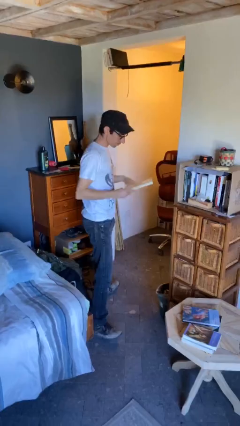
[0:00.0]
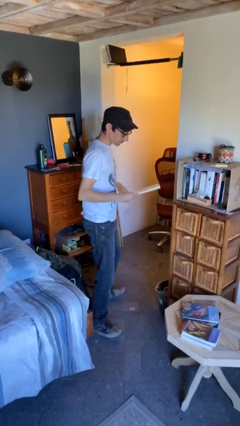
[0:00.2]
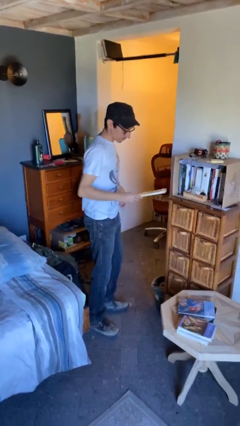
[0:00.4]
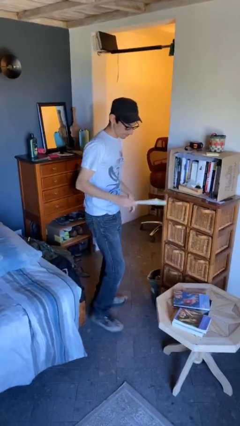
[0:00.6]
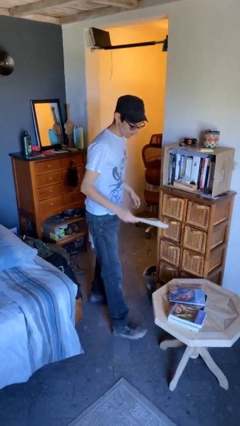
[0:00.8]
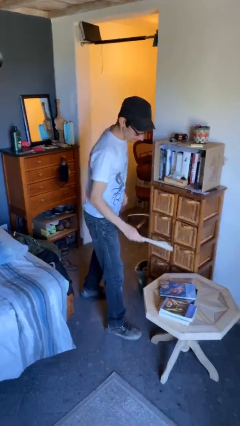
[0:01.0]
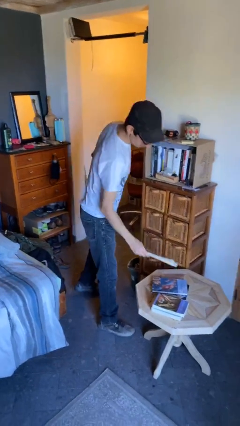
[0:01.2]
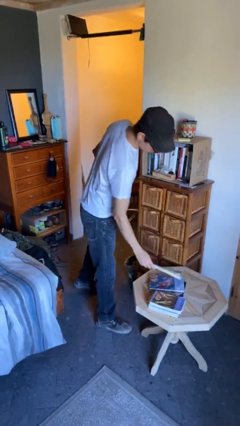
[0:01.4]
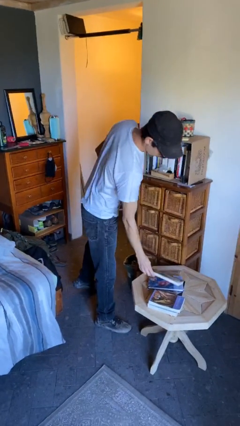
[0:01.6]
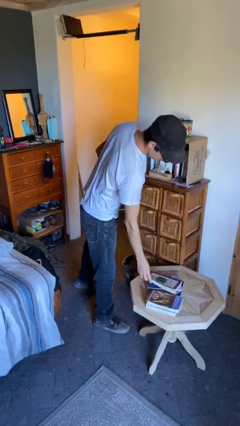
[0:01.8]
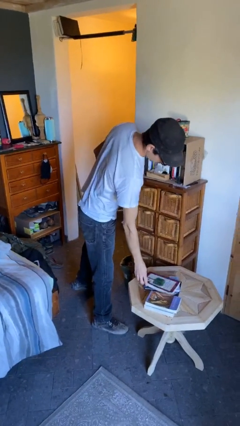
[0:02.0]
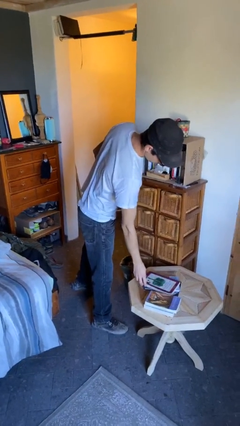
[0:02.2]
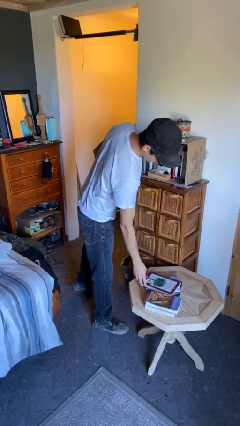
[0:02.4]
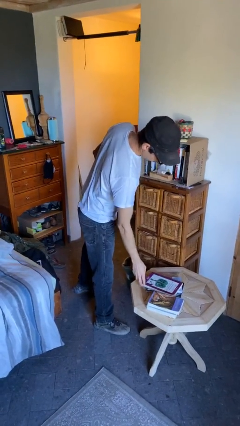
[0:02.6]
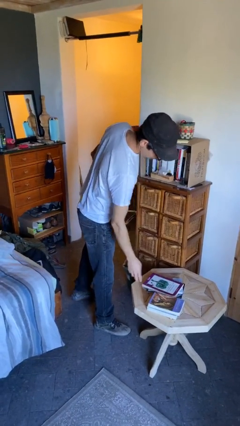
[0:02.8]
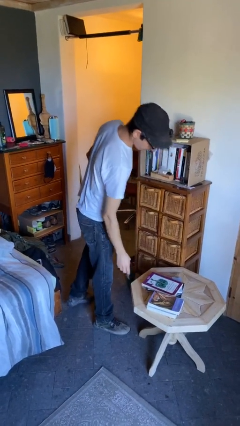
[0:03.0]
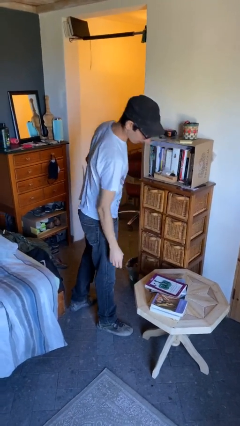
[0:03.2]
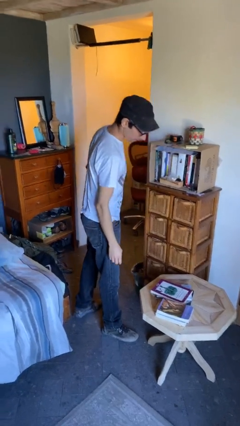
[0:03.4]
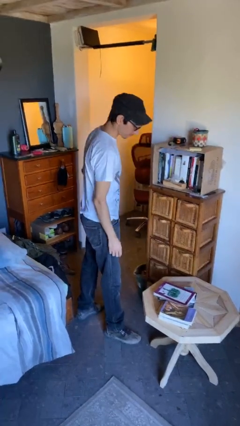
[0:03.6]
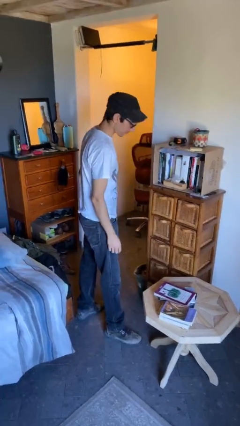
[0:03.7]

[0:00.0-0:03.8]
person puts down object on table

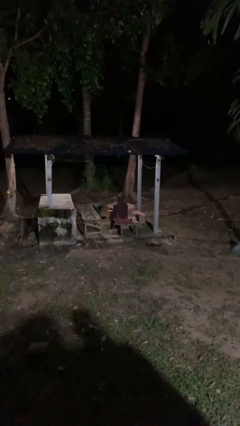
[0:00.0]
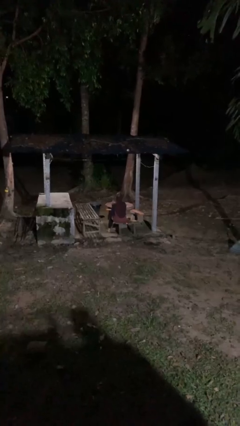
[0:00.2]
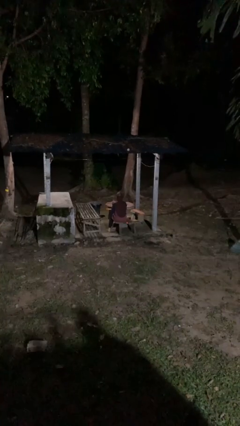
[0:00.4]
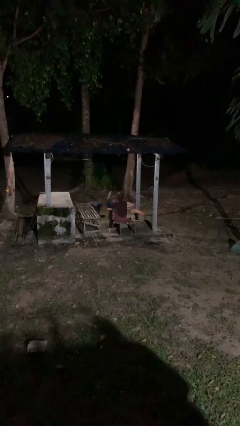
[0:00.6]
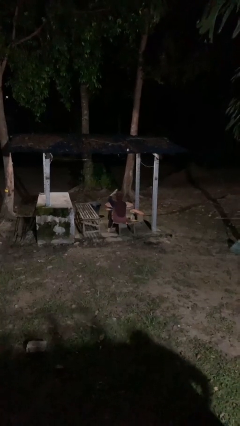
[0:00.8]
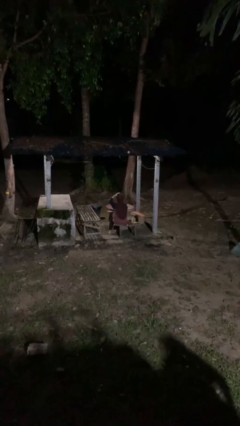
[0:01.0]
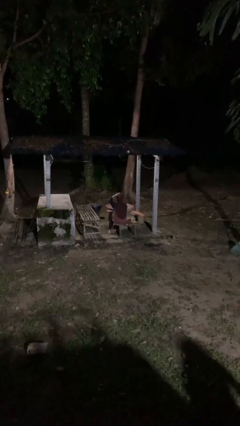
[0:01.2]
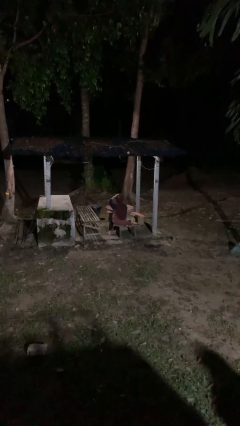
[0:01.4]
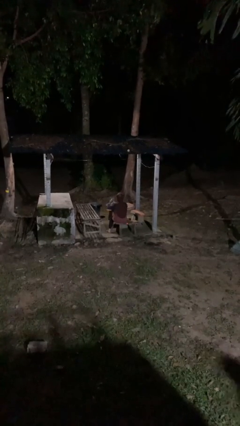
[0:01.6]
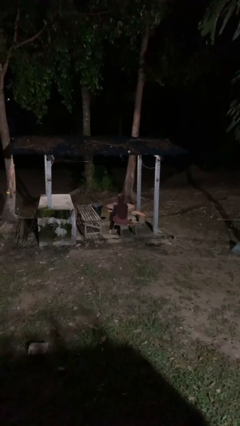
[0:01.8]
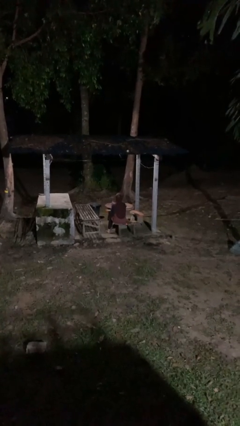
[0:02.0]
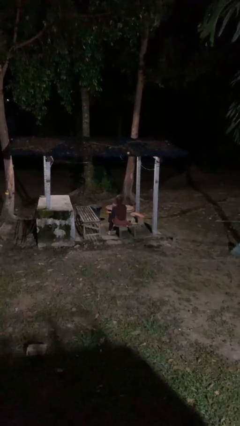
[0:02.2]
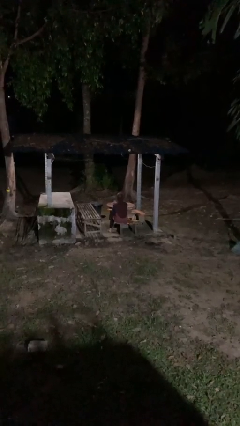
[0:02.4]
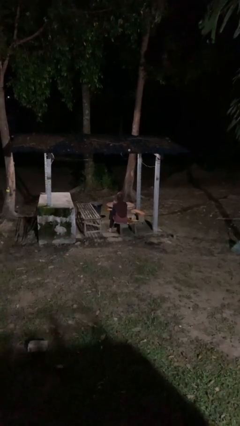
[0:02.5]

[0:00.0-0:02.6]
person pats head

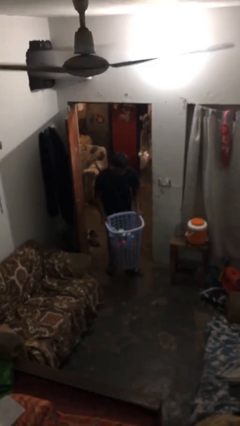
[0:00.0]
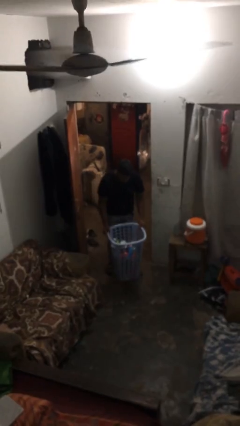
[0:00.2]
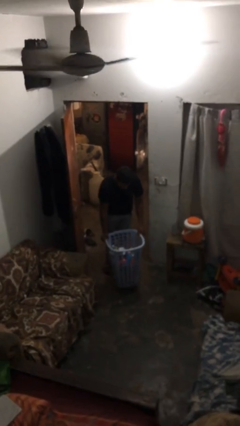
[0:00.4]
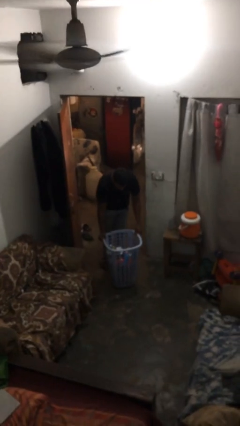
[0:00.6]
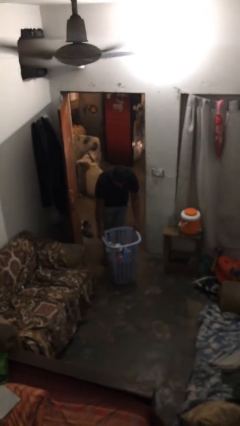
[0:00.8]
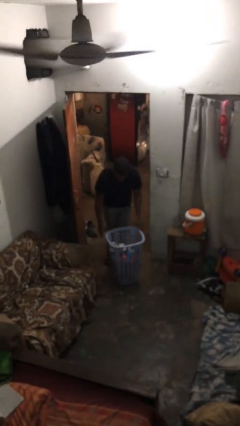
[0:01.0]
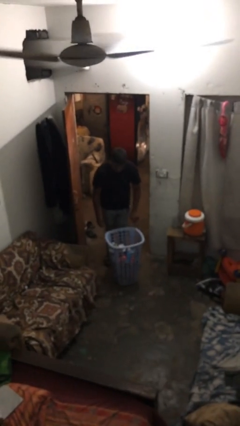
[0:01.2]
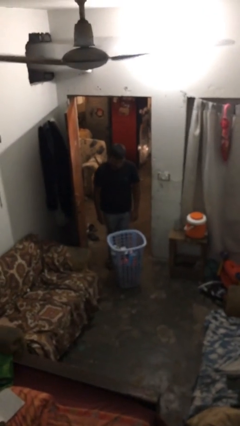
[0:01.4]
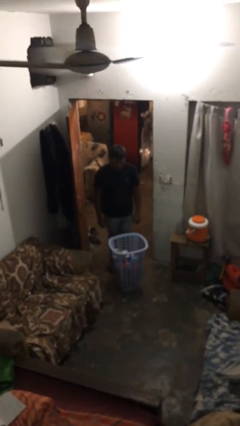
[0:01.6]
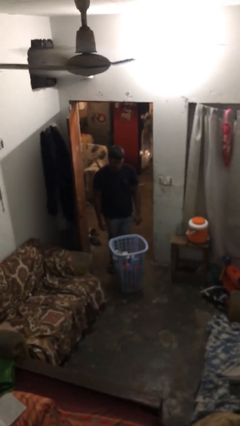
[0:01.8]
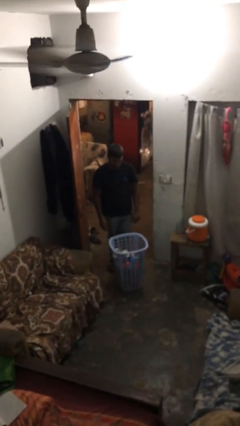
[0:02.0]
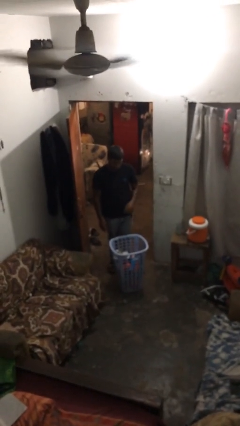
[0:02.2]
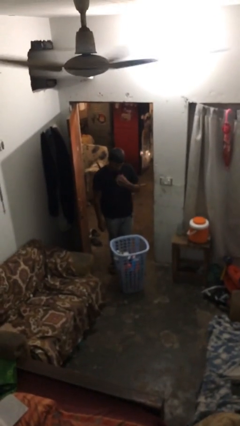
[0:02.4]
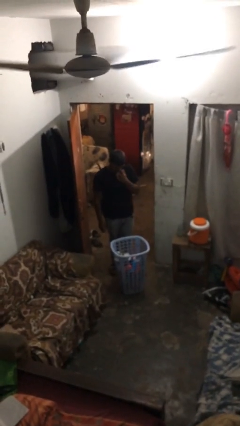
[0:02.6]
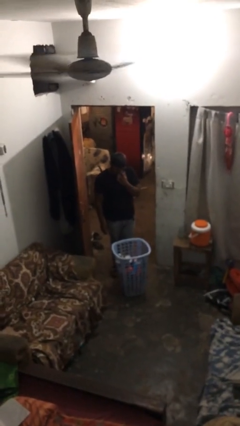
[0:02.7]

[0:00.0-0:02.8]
person puts down object on floor

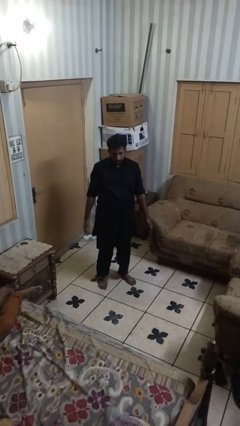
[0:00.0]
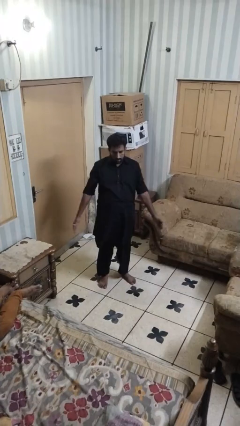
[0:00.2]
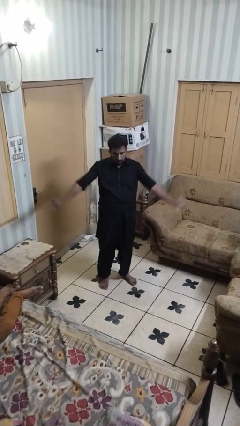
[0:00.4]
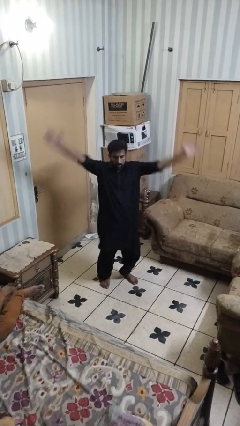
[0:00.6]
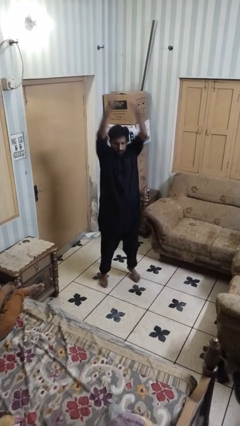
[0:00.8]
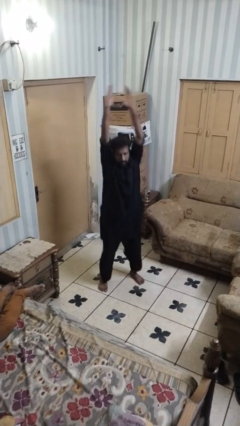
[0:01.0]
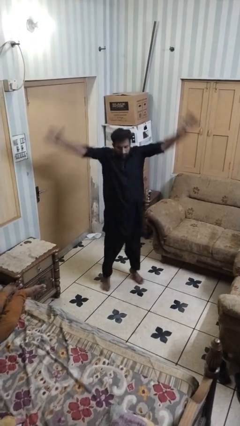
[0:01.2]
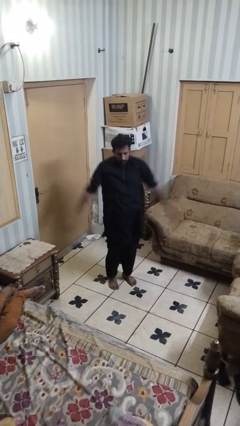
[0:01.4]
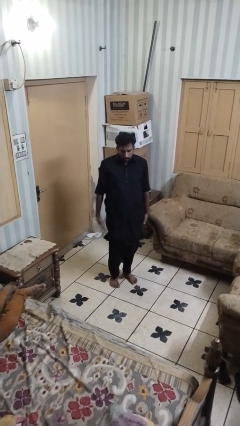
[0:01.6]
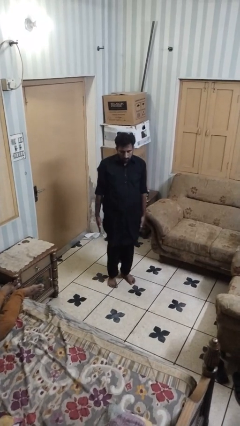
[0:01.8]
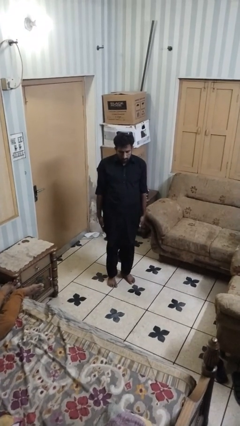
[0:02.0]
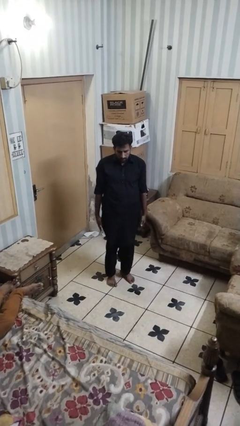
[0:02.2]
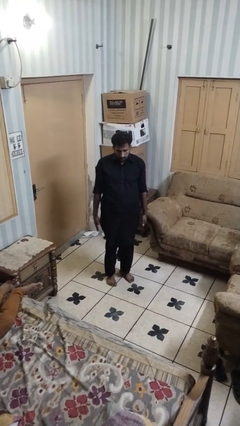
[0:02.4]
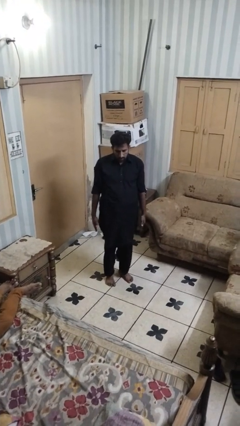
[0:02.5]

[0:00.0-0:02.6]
person exercises with jumping jacks

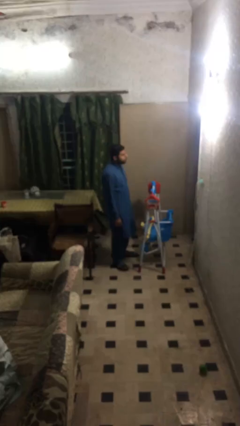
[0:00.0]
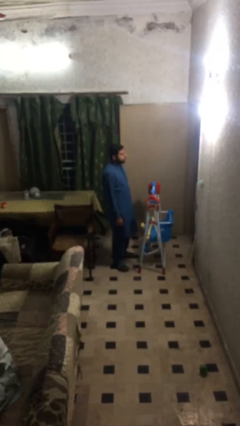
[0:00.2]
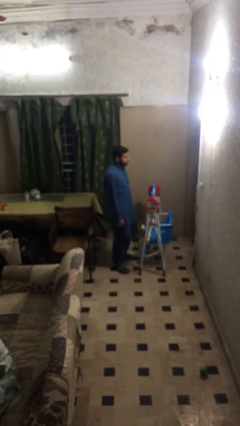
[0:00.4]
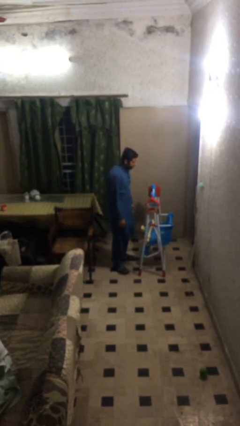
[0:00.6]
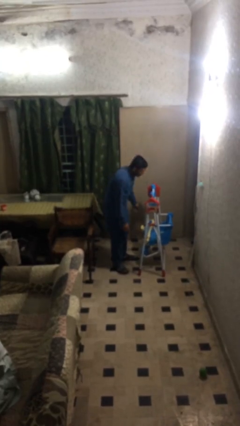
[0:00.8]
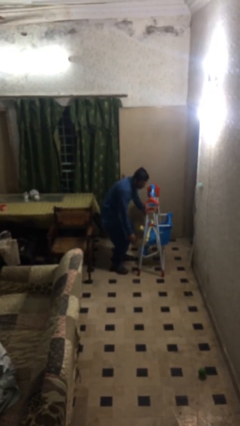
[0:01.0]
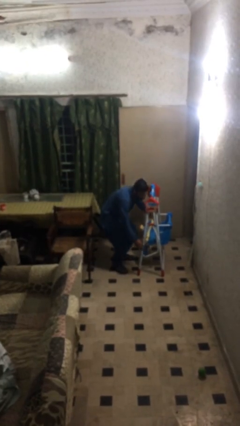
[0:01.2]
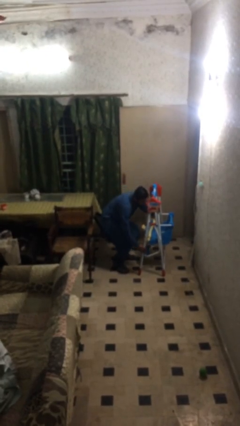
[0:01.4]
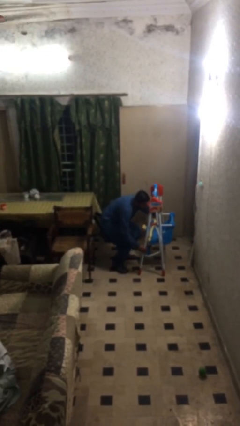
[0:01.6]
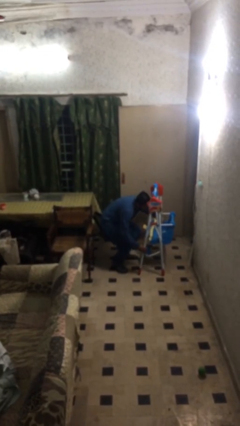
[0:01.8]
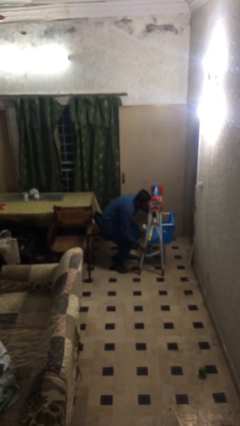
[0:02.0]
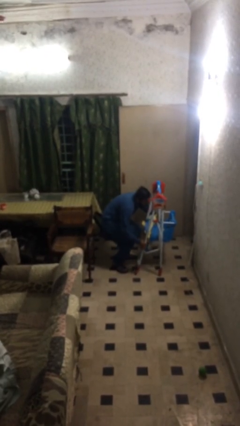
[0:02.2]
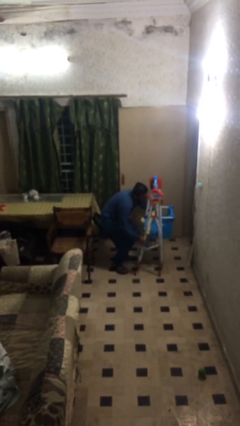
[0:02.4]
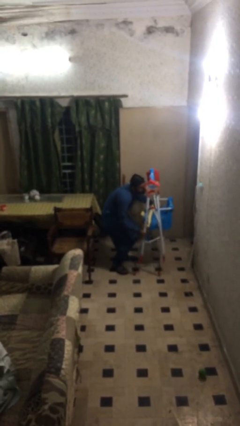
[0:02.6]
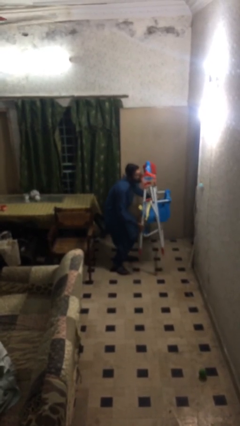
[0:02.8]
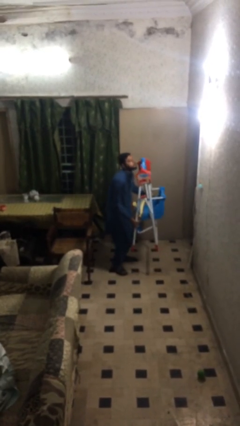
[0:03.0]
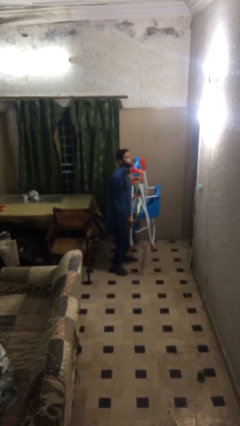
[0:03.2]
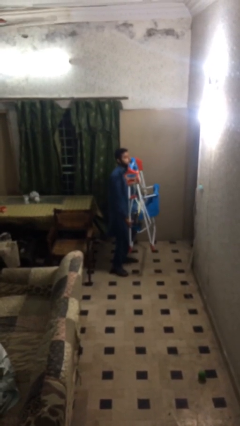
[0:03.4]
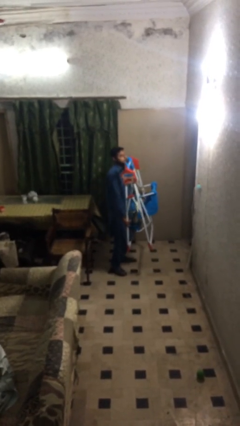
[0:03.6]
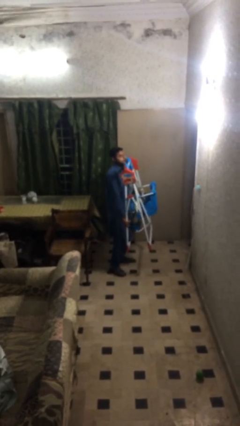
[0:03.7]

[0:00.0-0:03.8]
person picks up object from floor

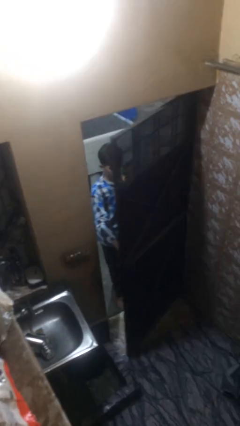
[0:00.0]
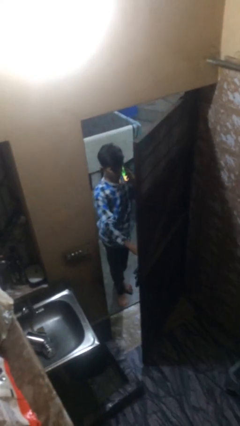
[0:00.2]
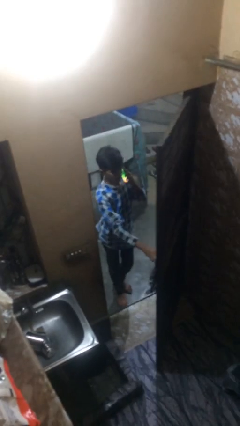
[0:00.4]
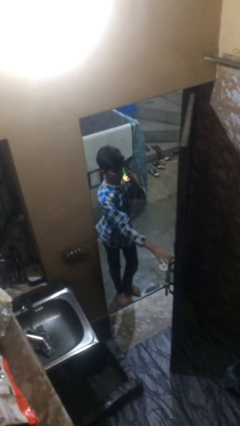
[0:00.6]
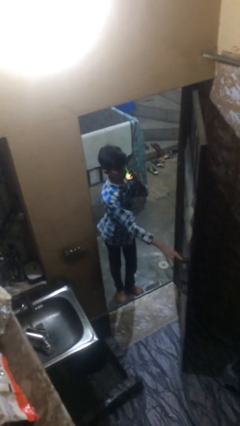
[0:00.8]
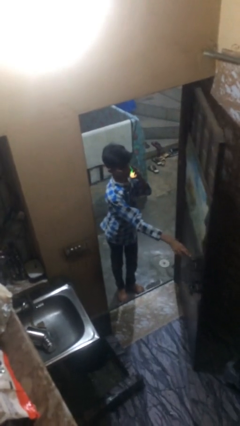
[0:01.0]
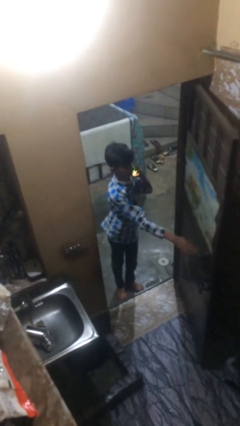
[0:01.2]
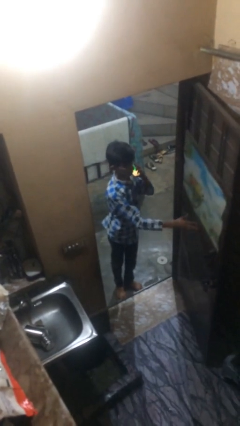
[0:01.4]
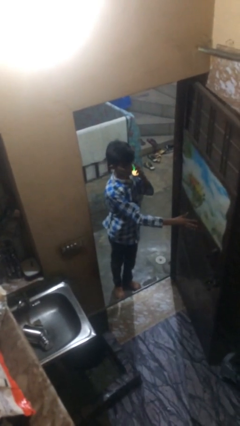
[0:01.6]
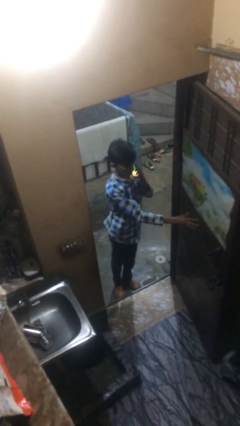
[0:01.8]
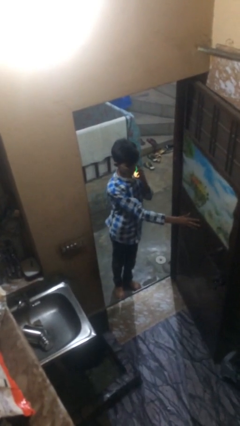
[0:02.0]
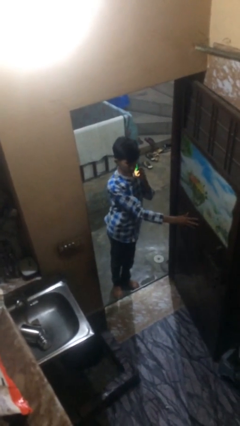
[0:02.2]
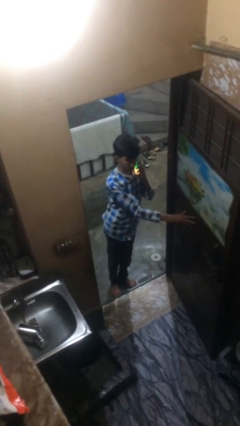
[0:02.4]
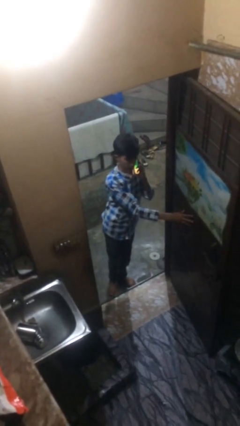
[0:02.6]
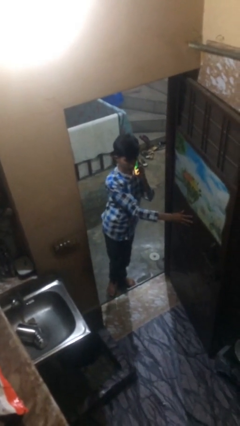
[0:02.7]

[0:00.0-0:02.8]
person opens facility door
